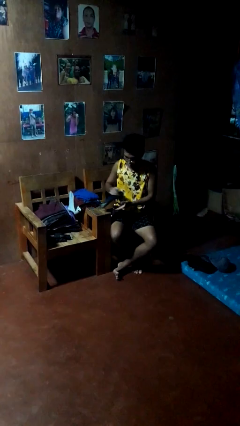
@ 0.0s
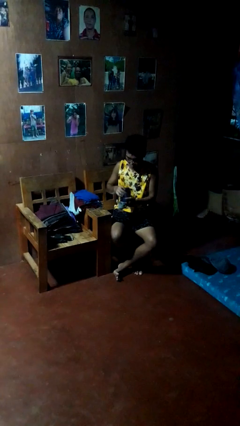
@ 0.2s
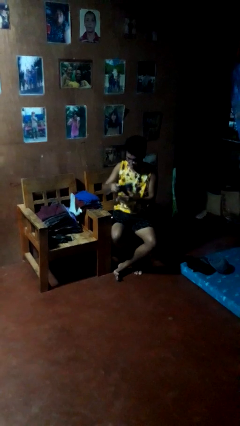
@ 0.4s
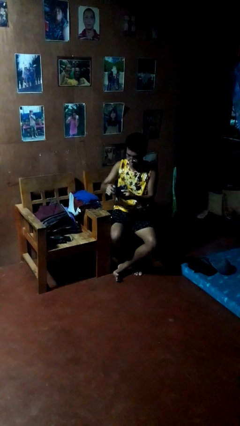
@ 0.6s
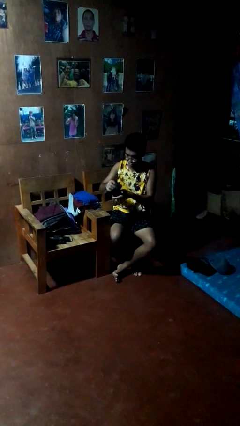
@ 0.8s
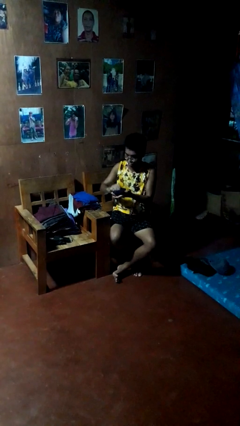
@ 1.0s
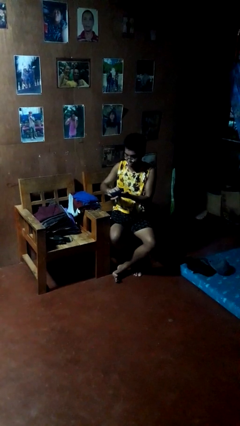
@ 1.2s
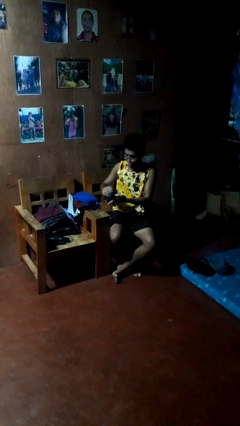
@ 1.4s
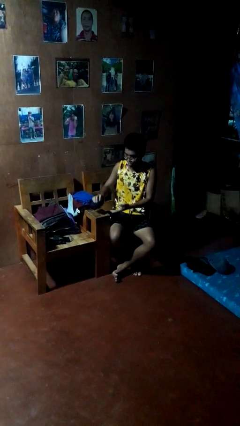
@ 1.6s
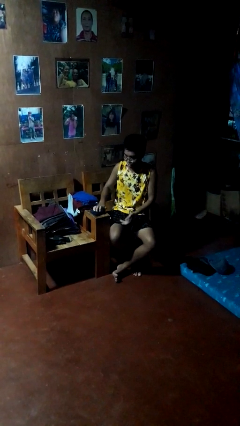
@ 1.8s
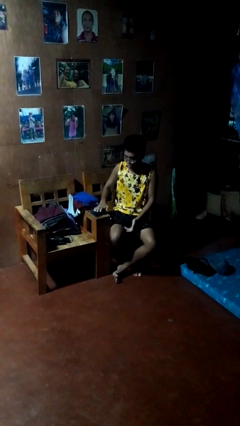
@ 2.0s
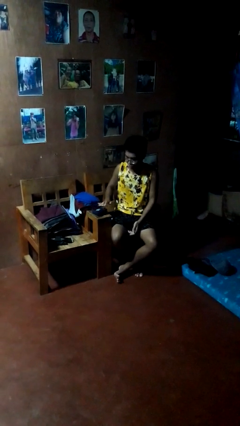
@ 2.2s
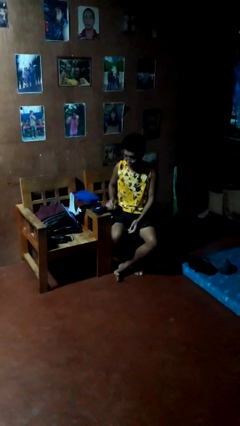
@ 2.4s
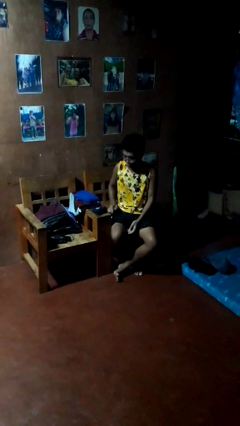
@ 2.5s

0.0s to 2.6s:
person folds socks

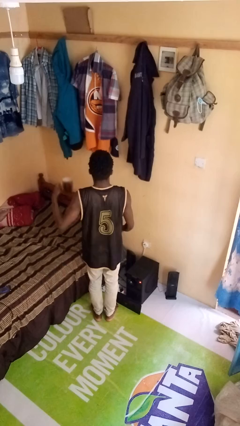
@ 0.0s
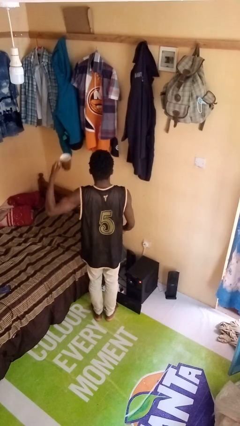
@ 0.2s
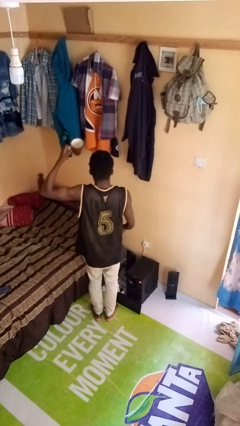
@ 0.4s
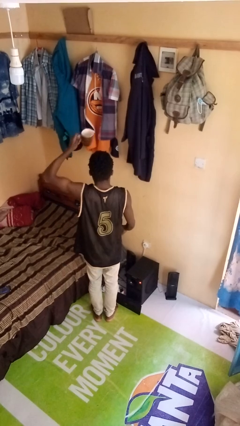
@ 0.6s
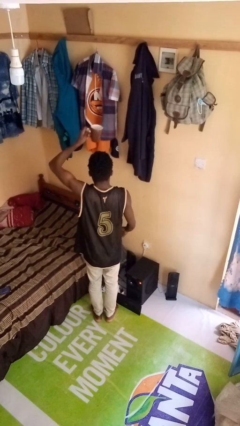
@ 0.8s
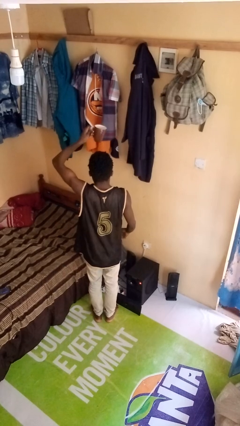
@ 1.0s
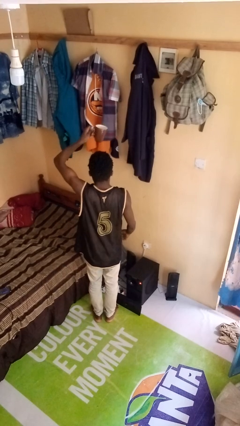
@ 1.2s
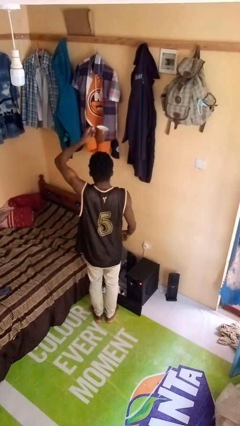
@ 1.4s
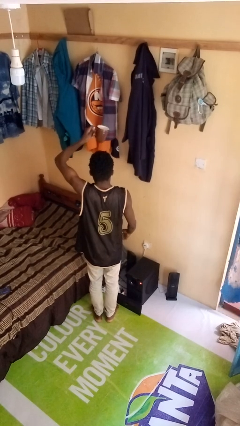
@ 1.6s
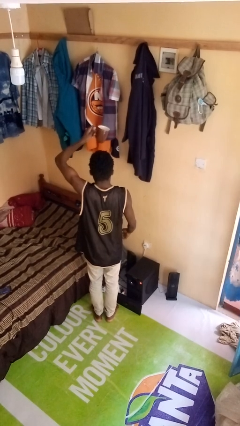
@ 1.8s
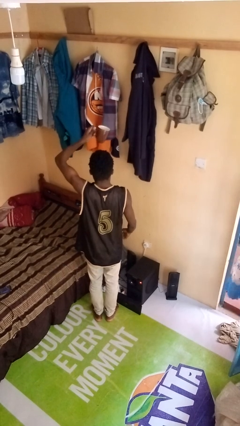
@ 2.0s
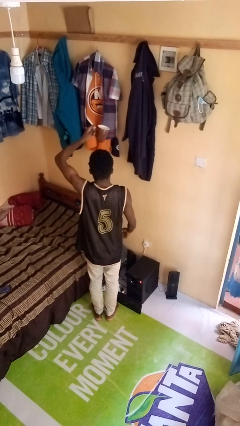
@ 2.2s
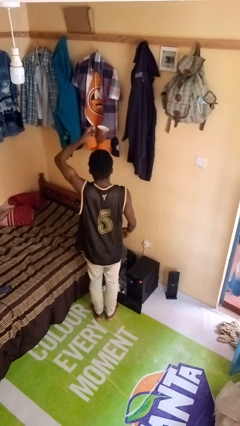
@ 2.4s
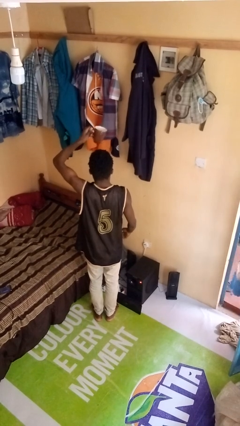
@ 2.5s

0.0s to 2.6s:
person holds object above head

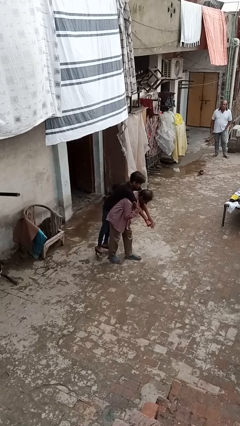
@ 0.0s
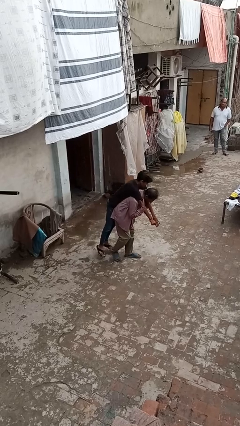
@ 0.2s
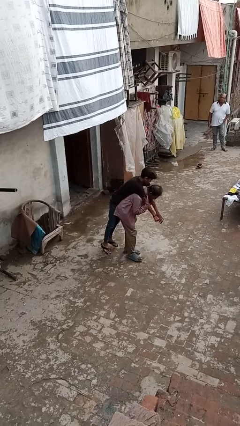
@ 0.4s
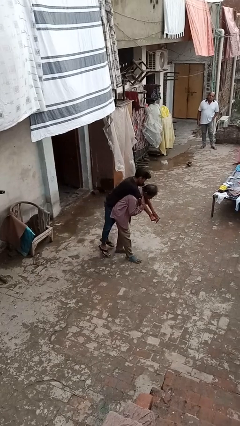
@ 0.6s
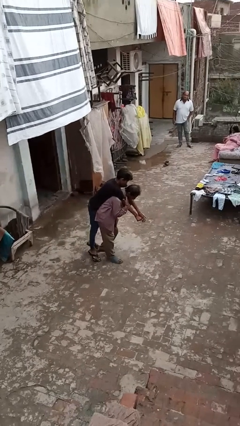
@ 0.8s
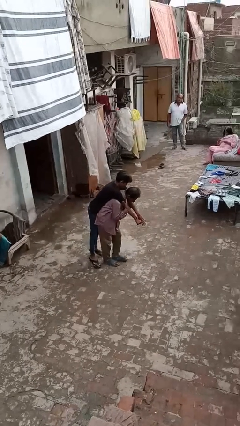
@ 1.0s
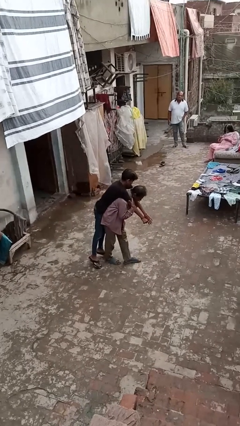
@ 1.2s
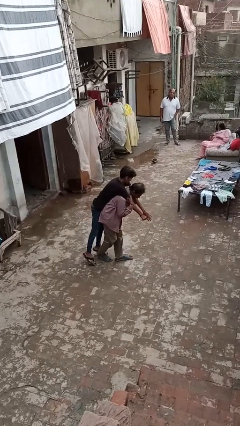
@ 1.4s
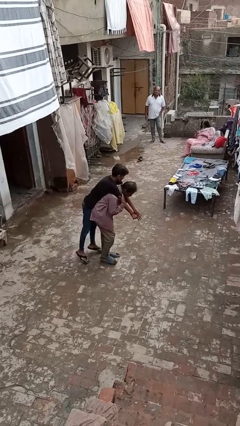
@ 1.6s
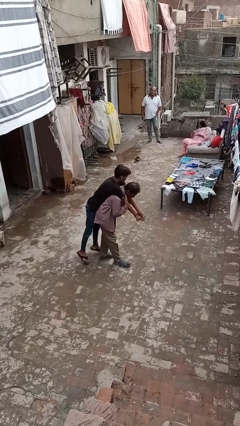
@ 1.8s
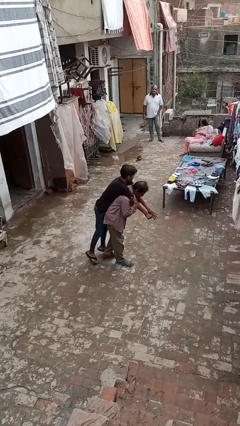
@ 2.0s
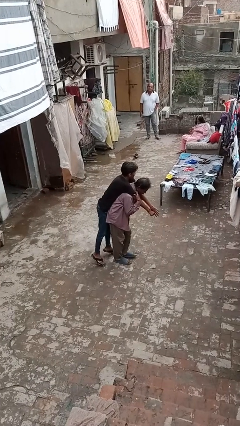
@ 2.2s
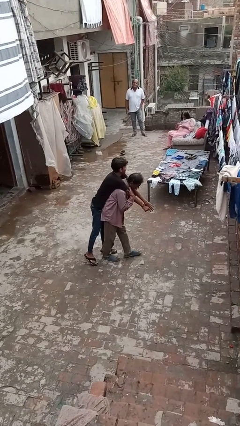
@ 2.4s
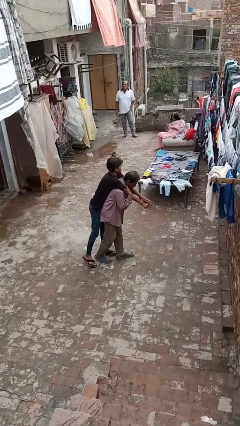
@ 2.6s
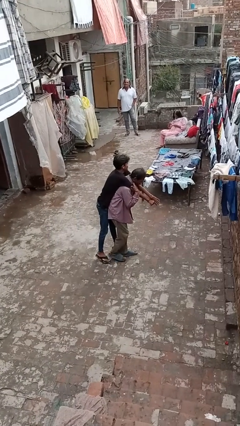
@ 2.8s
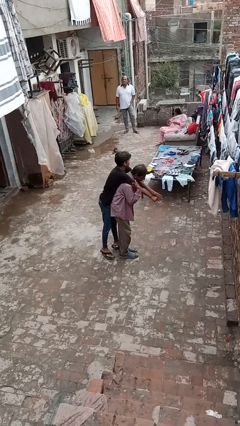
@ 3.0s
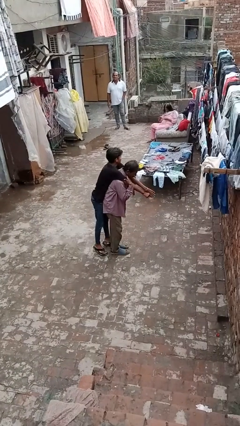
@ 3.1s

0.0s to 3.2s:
person carries person on back

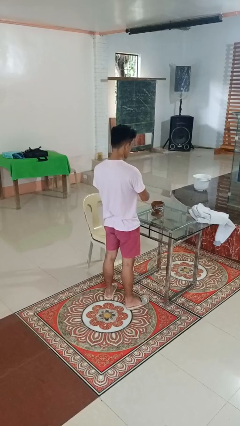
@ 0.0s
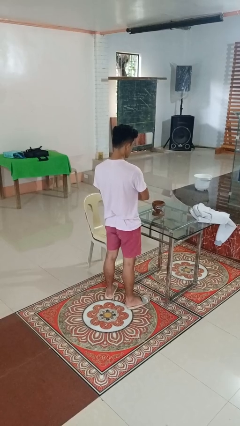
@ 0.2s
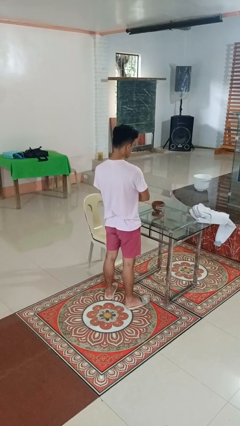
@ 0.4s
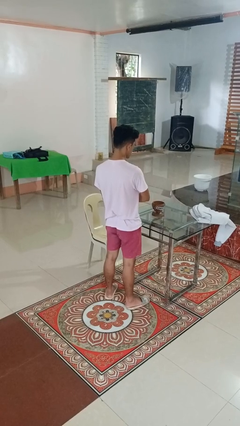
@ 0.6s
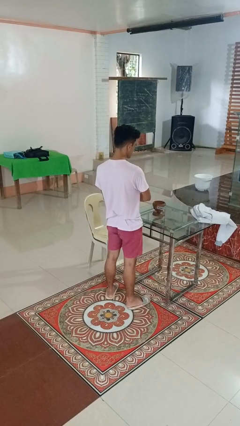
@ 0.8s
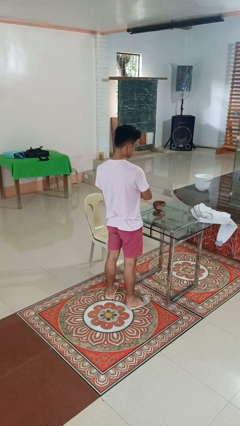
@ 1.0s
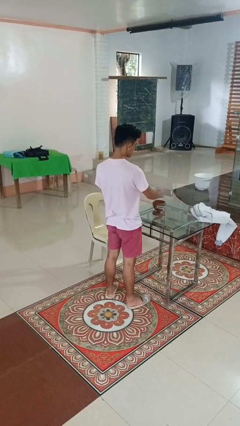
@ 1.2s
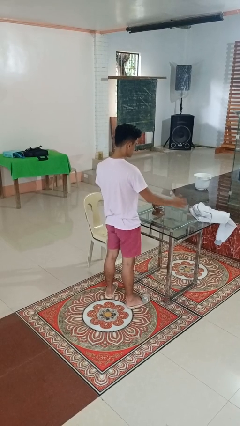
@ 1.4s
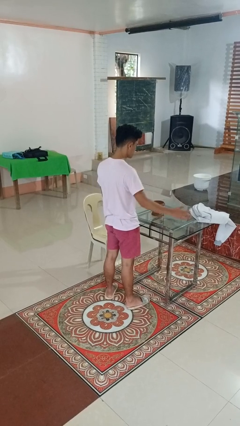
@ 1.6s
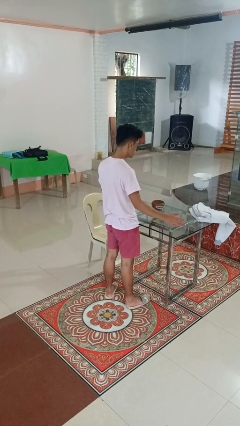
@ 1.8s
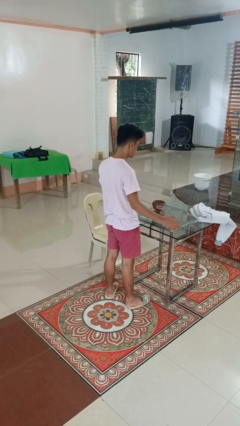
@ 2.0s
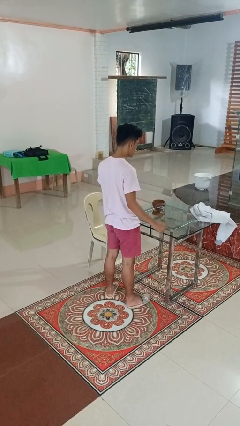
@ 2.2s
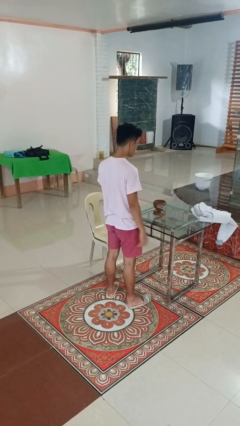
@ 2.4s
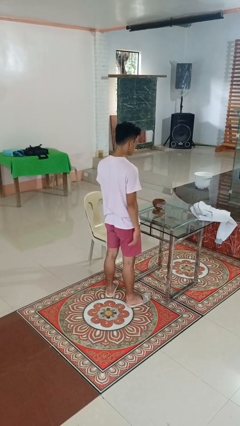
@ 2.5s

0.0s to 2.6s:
person waves hand over object

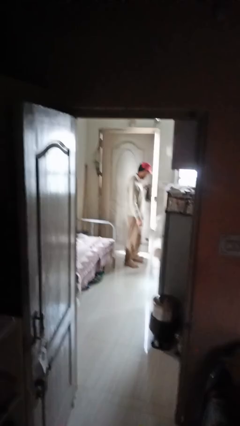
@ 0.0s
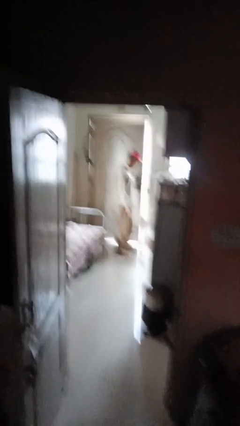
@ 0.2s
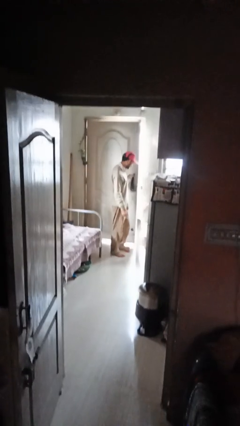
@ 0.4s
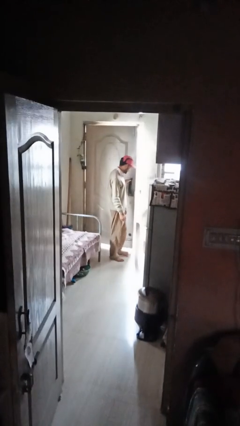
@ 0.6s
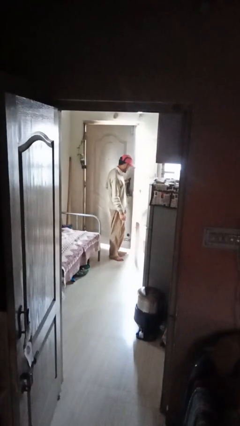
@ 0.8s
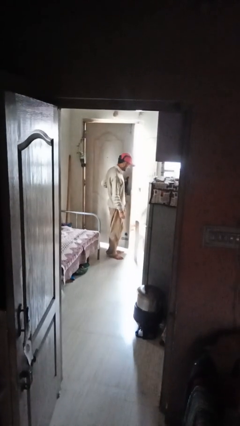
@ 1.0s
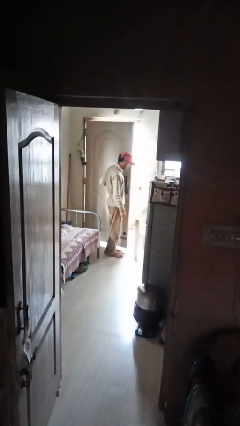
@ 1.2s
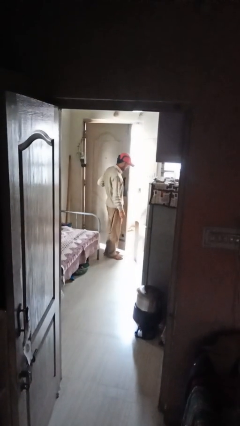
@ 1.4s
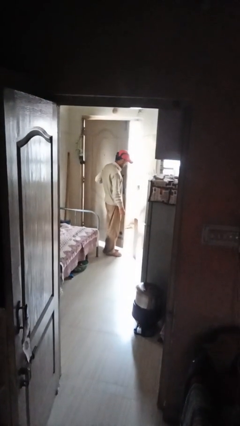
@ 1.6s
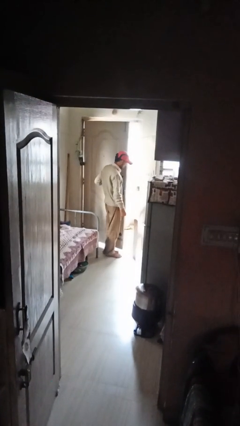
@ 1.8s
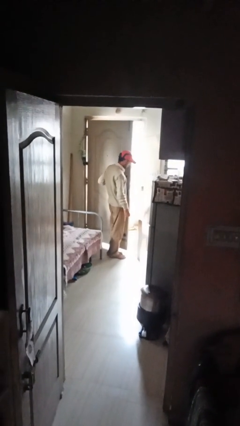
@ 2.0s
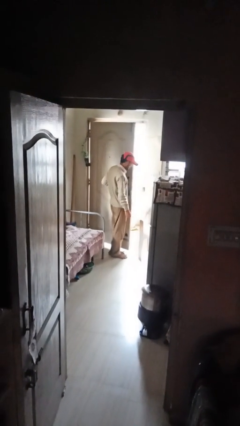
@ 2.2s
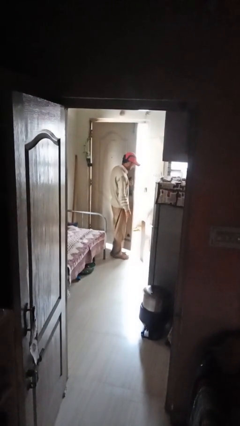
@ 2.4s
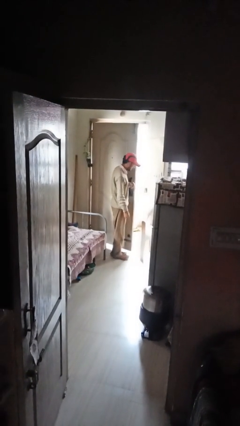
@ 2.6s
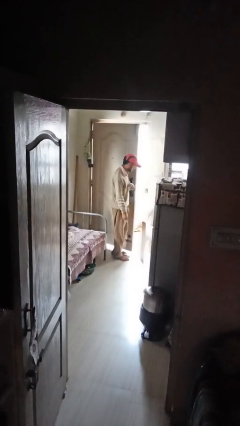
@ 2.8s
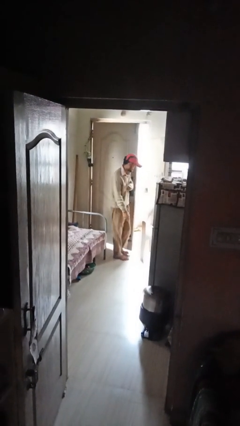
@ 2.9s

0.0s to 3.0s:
person opens facility door

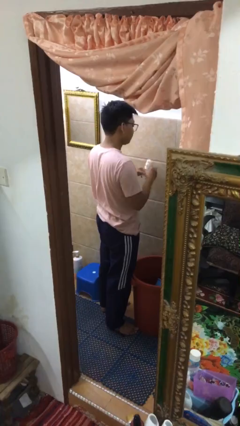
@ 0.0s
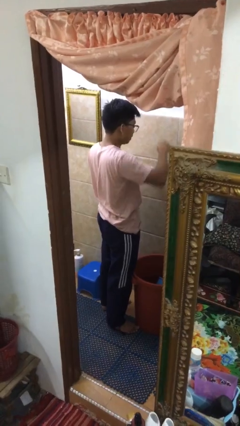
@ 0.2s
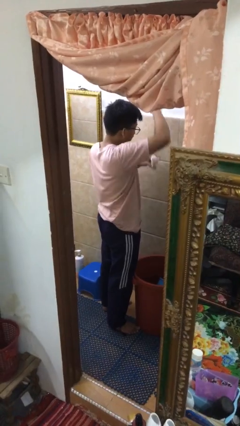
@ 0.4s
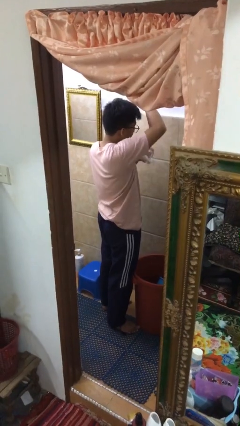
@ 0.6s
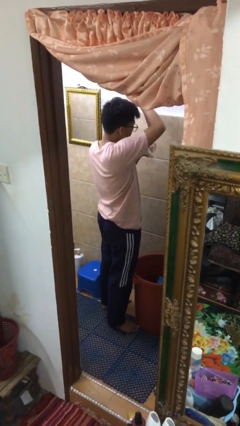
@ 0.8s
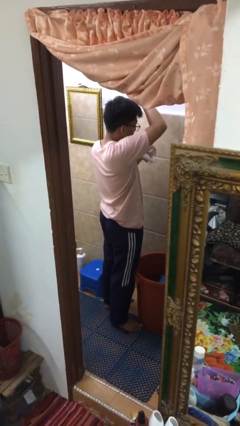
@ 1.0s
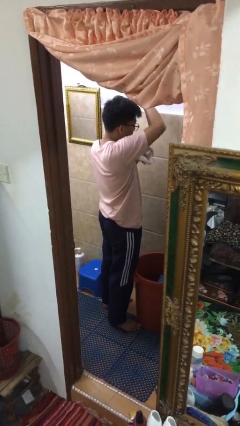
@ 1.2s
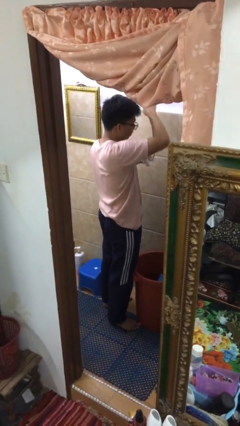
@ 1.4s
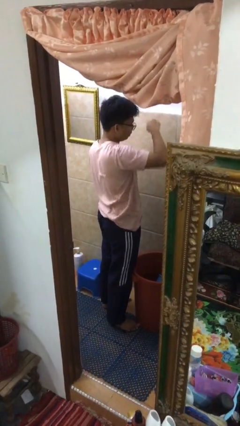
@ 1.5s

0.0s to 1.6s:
person applies deodorant

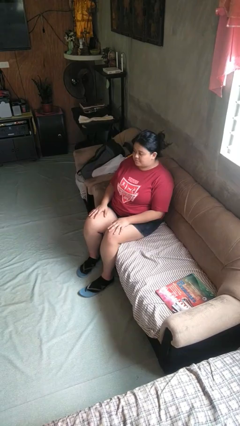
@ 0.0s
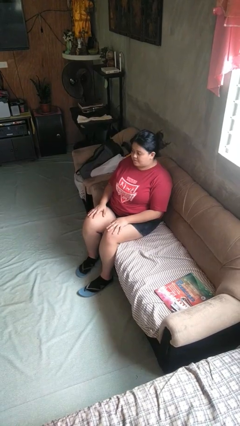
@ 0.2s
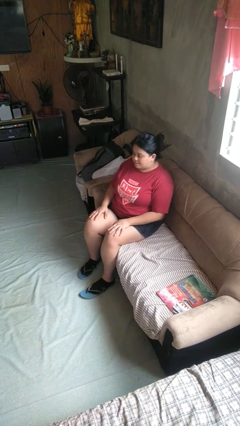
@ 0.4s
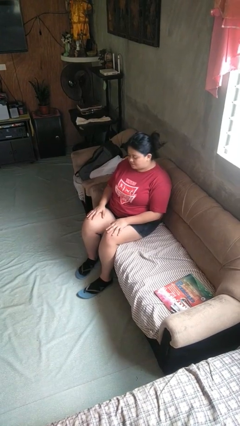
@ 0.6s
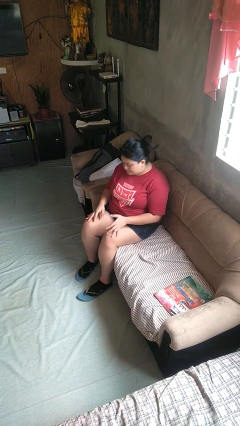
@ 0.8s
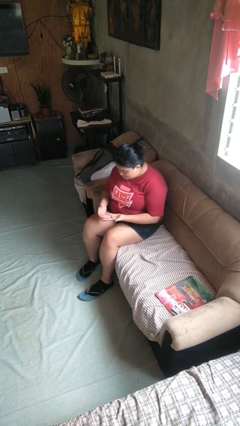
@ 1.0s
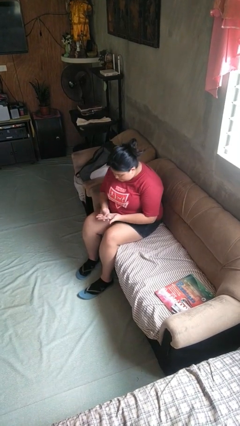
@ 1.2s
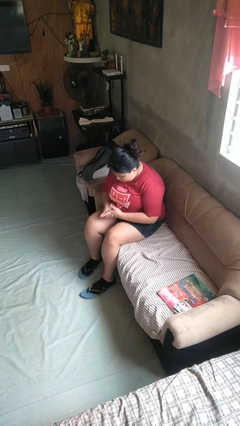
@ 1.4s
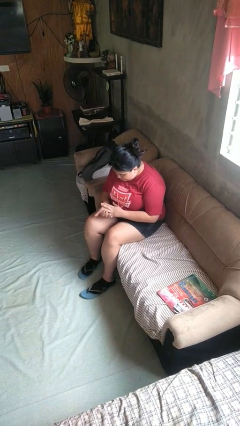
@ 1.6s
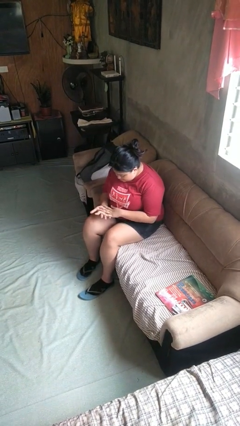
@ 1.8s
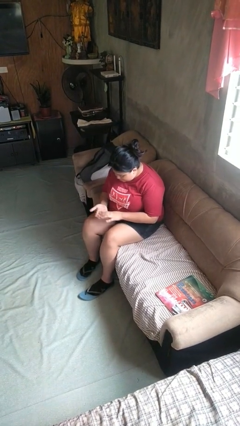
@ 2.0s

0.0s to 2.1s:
person looks at hands in lap
